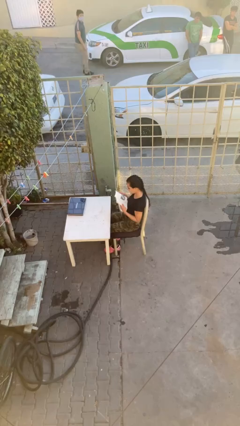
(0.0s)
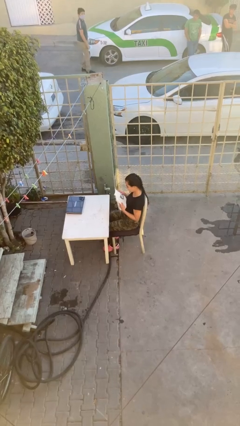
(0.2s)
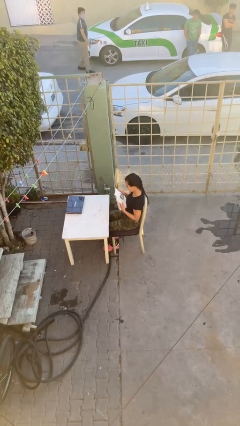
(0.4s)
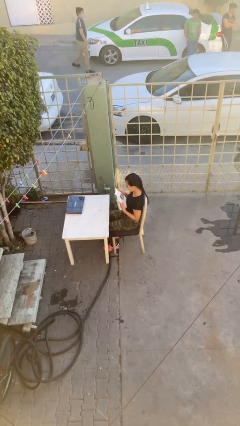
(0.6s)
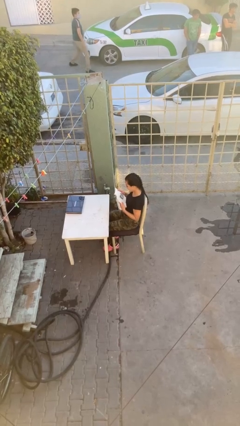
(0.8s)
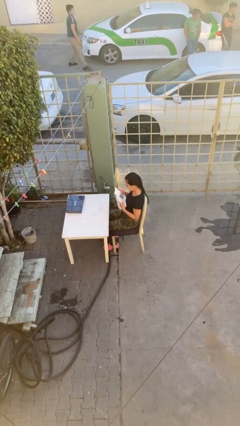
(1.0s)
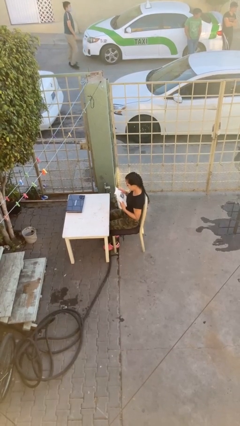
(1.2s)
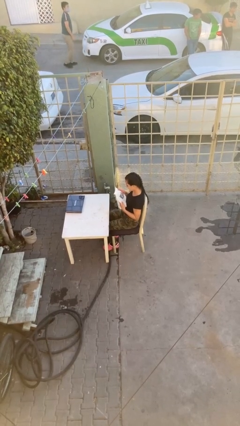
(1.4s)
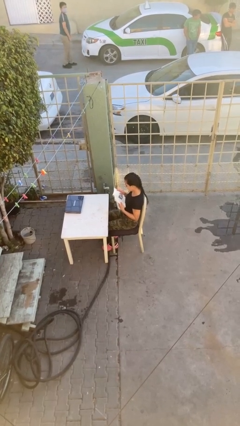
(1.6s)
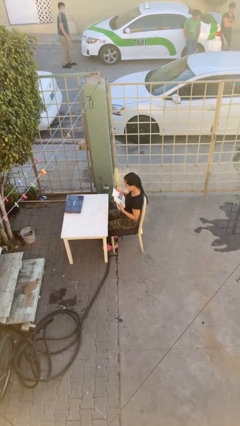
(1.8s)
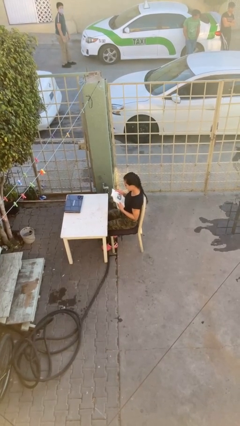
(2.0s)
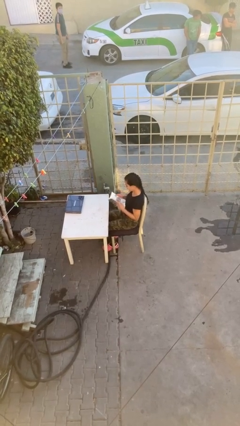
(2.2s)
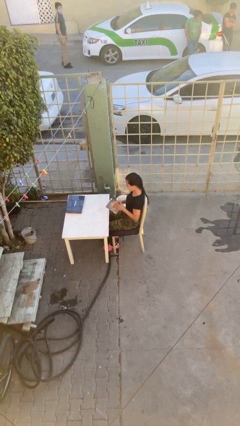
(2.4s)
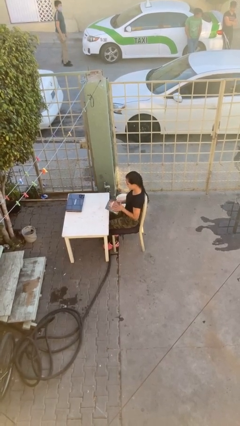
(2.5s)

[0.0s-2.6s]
person reads document

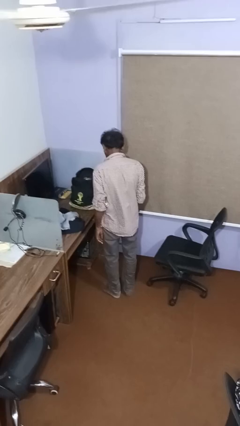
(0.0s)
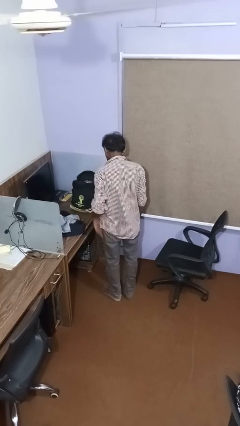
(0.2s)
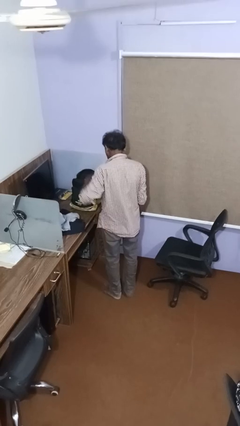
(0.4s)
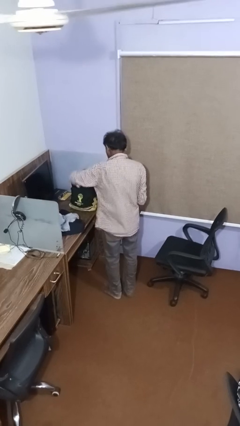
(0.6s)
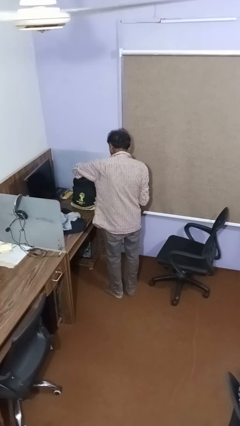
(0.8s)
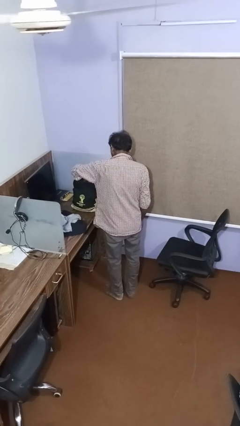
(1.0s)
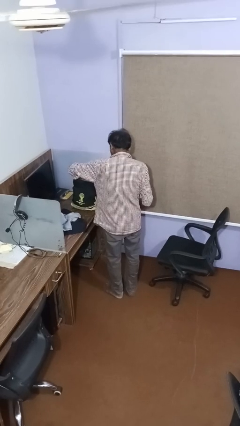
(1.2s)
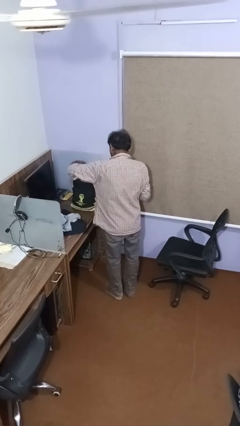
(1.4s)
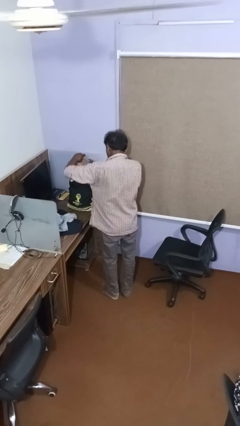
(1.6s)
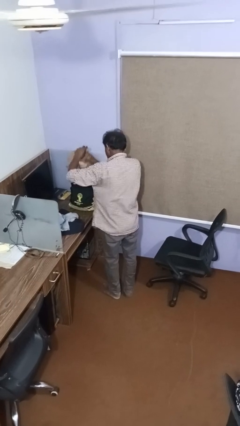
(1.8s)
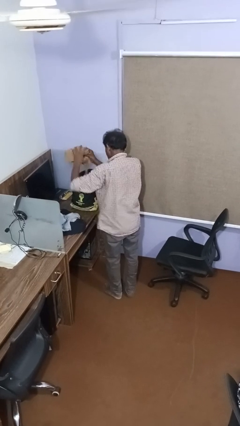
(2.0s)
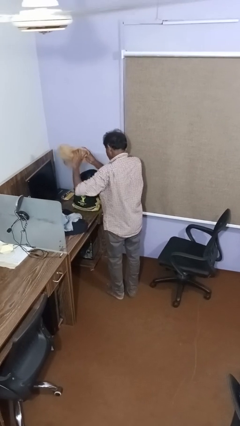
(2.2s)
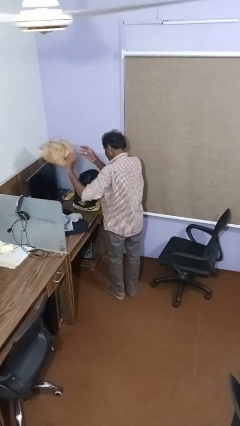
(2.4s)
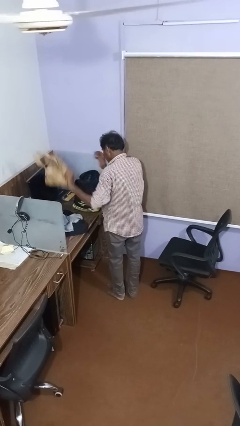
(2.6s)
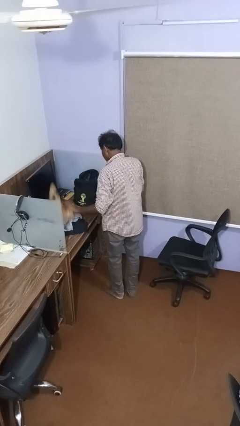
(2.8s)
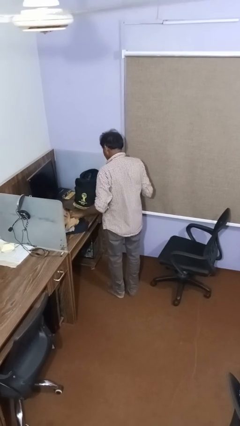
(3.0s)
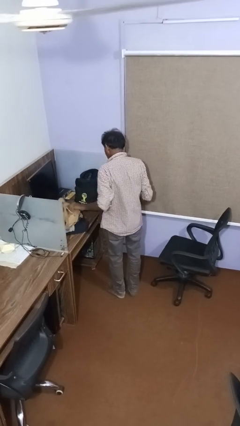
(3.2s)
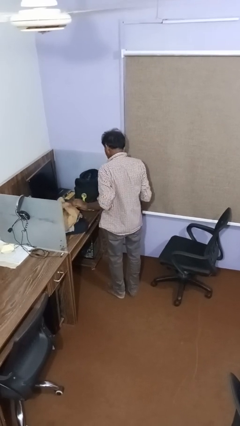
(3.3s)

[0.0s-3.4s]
person unloads clothes from suitcase

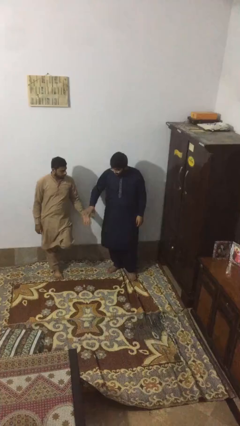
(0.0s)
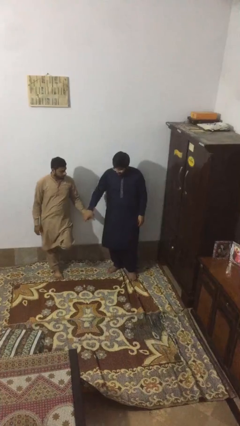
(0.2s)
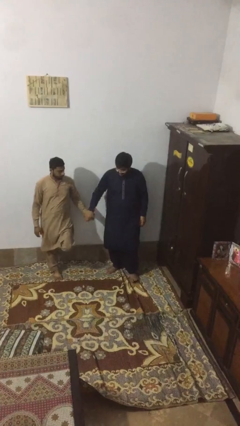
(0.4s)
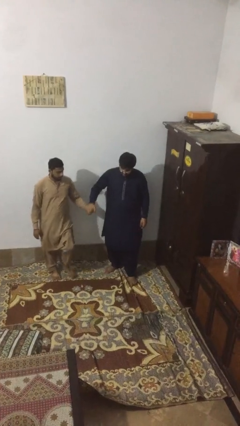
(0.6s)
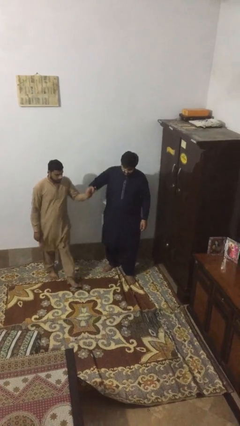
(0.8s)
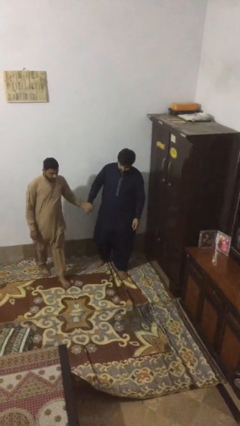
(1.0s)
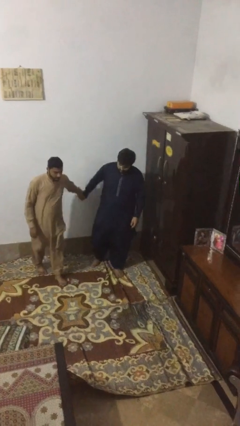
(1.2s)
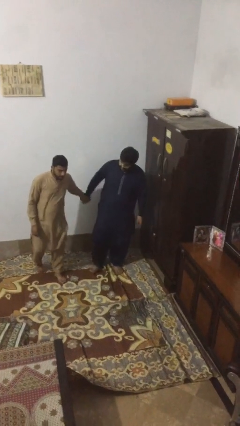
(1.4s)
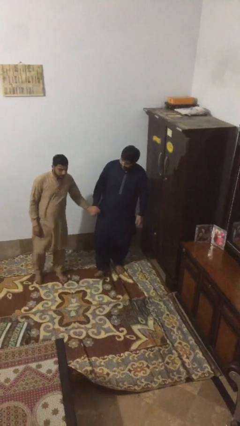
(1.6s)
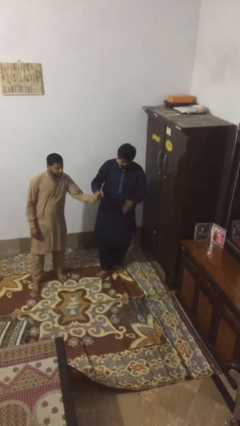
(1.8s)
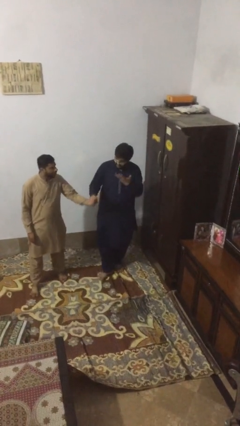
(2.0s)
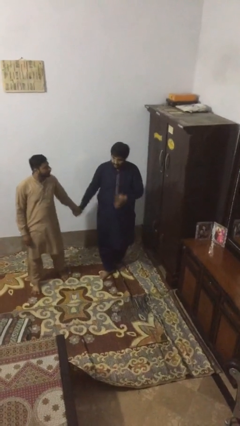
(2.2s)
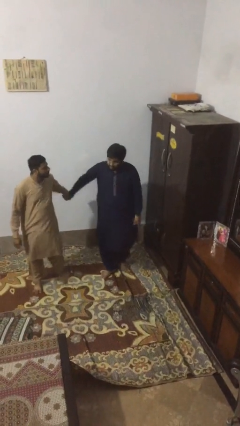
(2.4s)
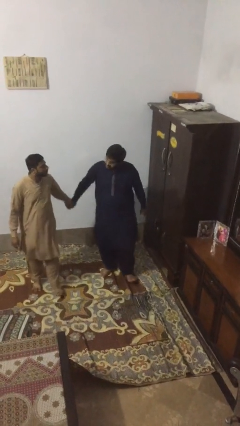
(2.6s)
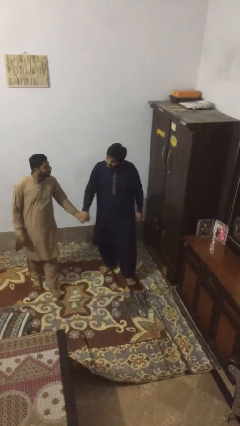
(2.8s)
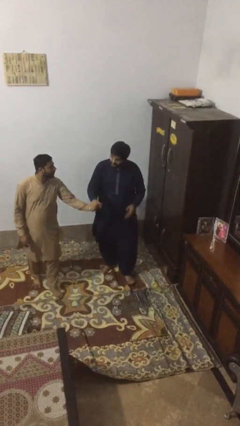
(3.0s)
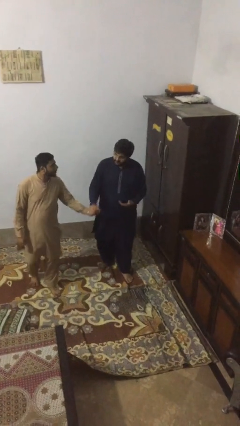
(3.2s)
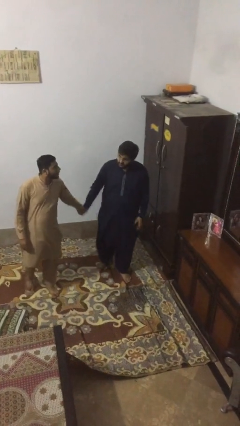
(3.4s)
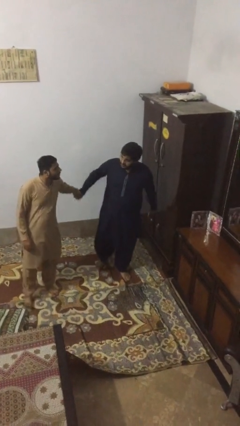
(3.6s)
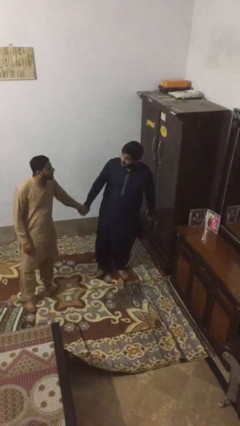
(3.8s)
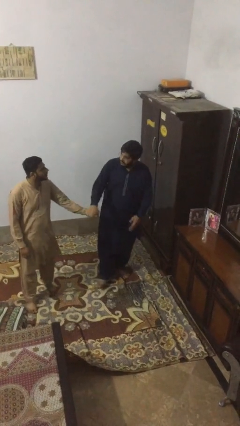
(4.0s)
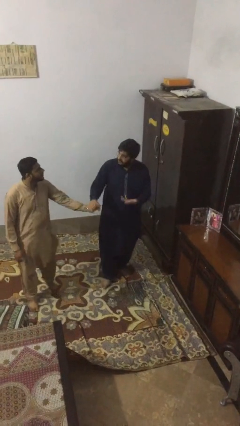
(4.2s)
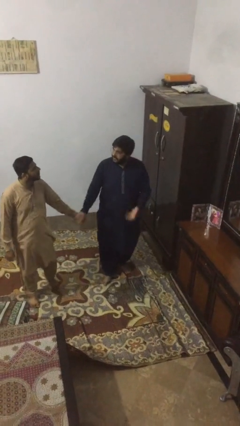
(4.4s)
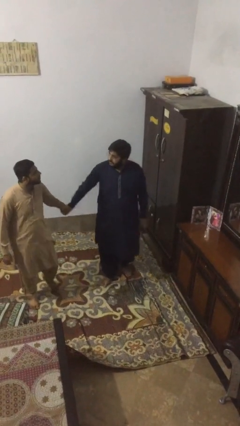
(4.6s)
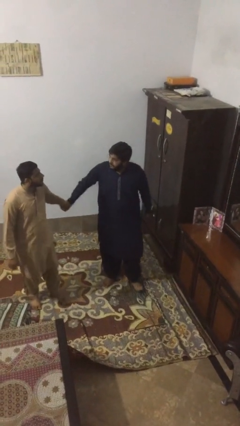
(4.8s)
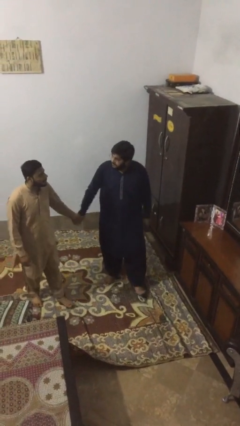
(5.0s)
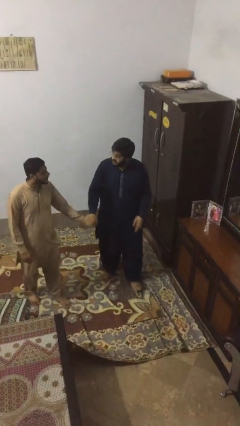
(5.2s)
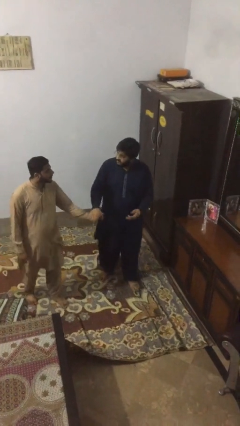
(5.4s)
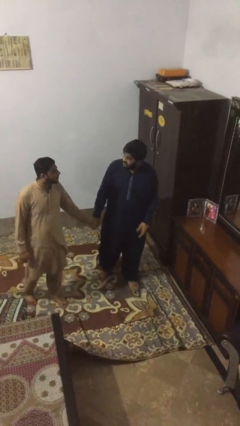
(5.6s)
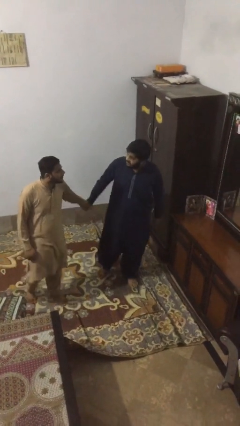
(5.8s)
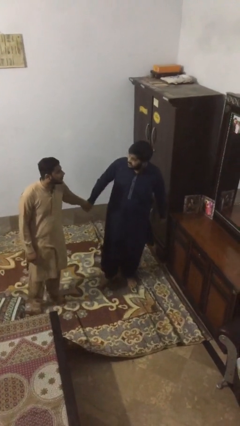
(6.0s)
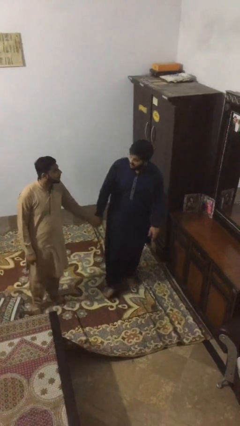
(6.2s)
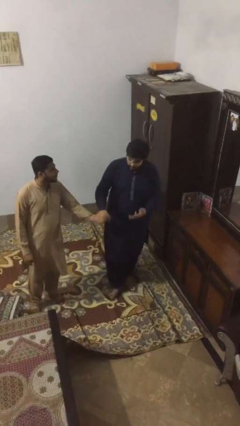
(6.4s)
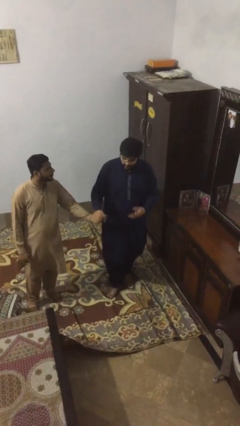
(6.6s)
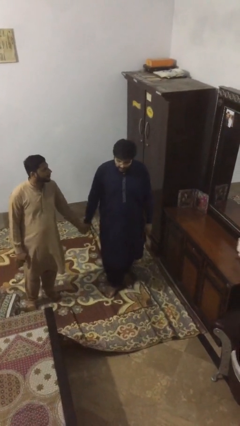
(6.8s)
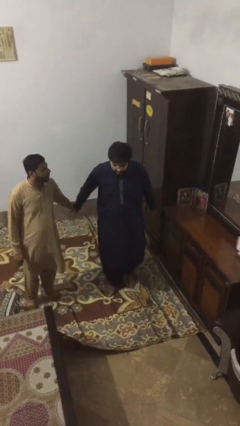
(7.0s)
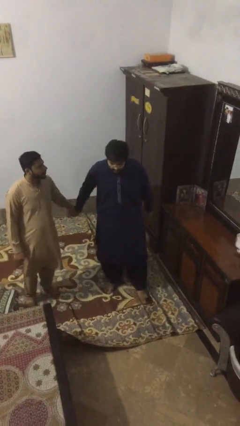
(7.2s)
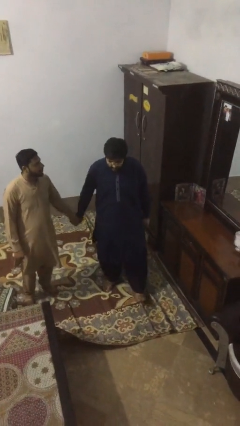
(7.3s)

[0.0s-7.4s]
person holds hand

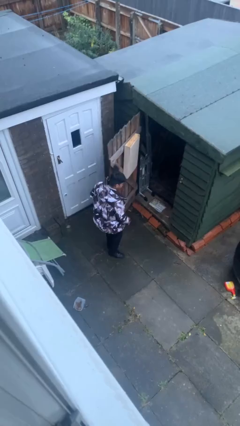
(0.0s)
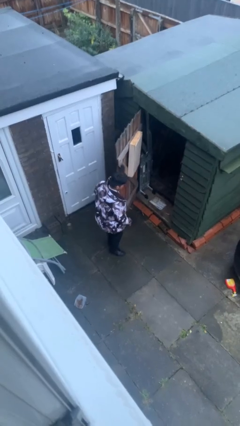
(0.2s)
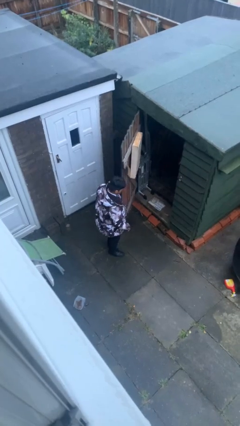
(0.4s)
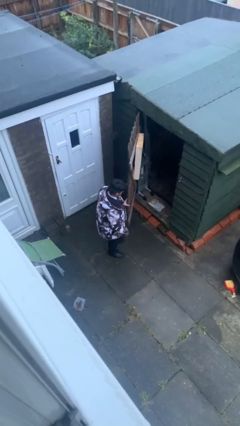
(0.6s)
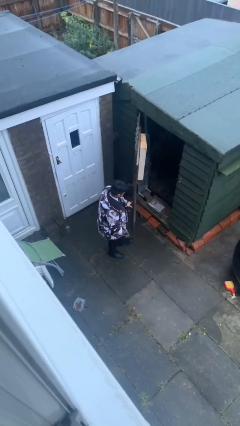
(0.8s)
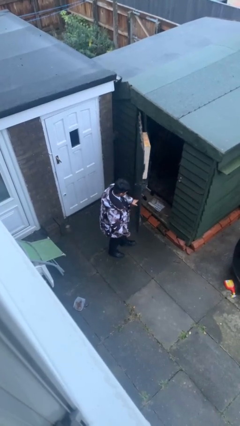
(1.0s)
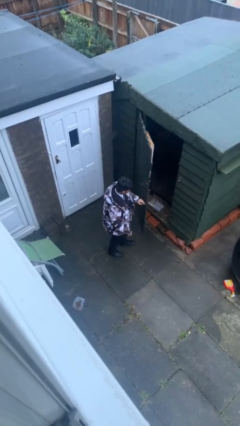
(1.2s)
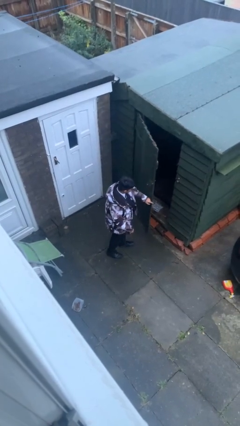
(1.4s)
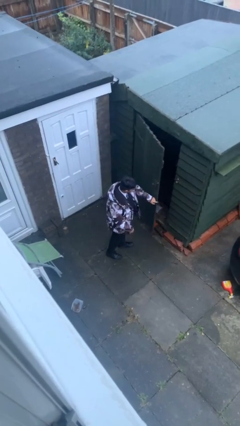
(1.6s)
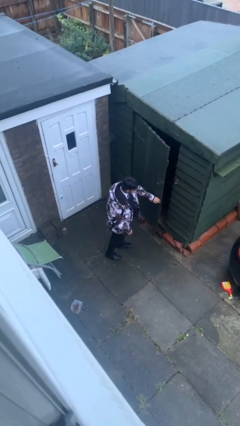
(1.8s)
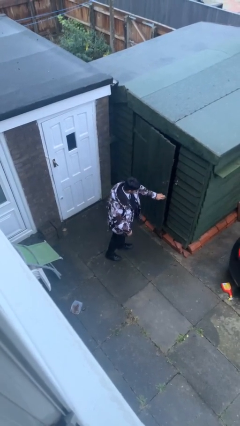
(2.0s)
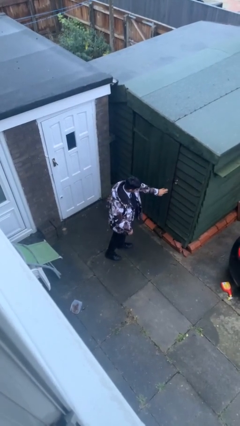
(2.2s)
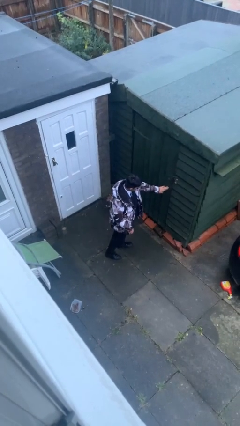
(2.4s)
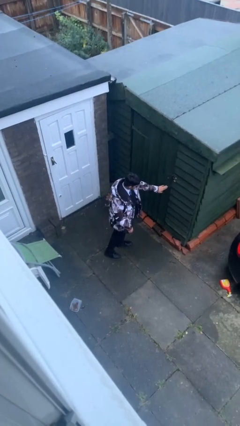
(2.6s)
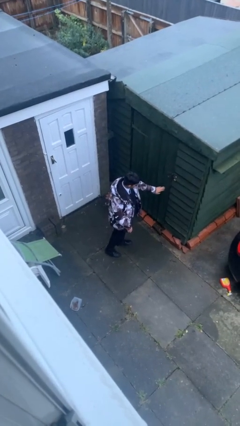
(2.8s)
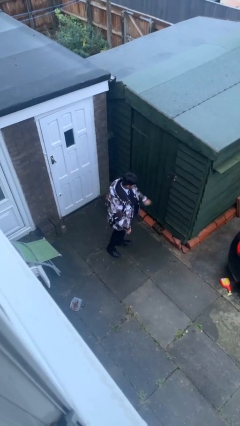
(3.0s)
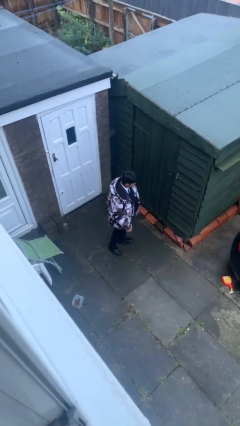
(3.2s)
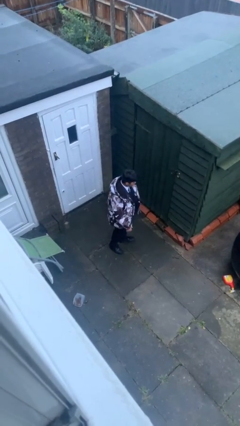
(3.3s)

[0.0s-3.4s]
person closes facility door

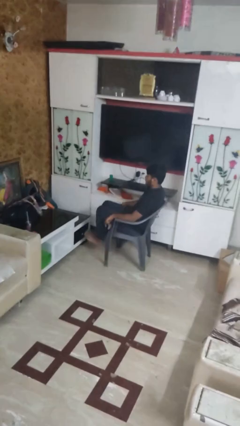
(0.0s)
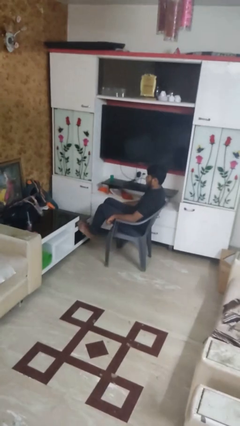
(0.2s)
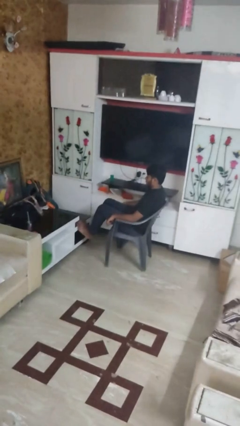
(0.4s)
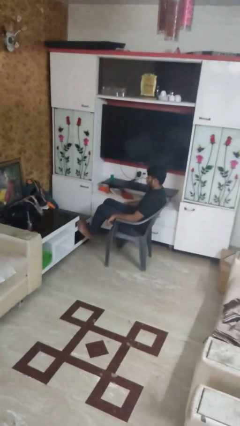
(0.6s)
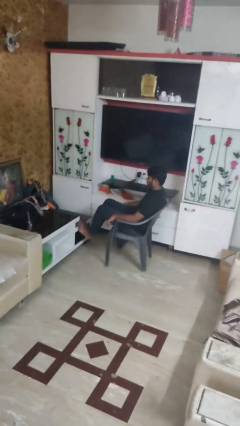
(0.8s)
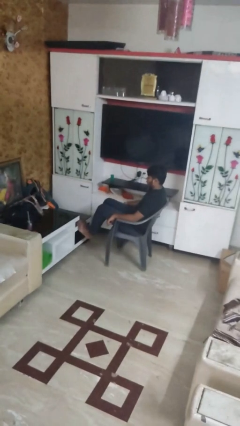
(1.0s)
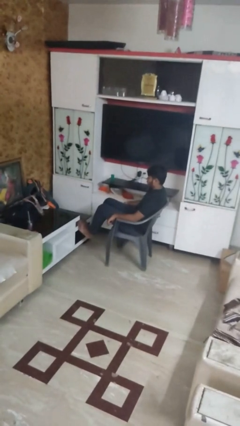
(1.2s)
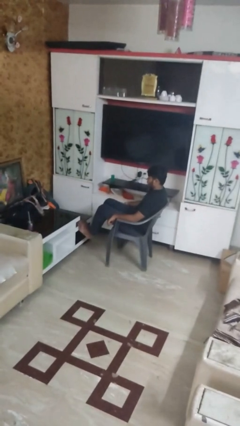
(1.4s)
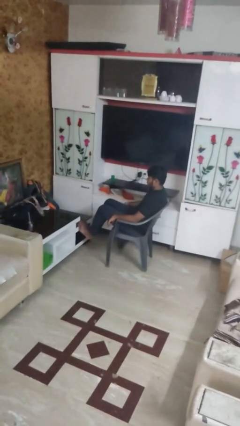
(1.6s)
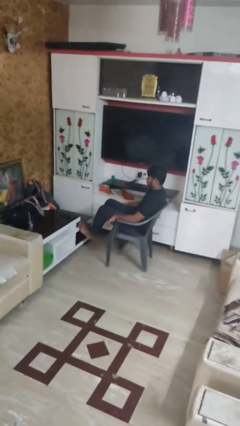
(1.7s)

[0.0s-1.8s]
person puts feet up
